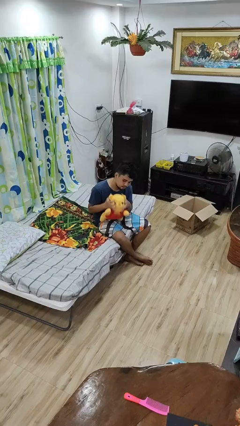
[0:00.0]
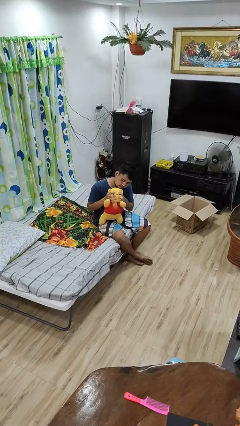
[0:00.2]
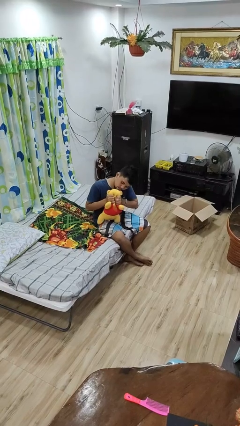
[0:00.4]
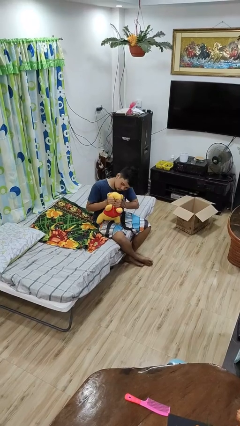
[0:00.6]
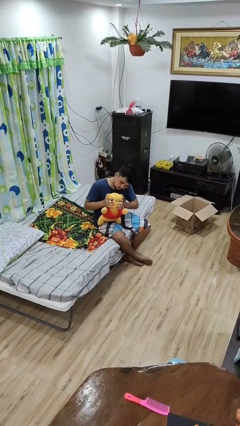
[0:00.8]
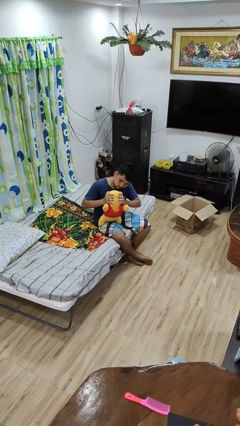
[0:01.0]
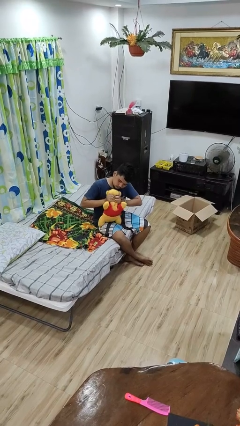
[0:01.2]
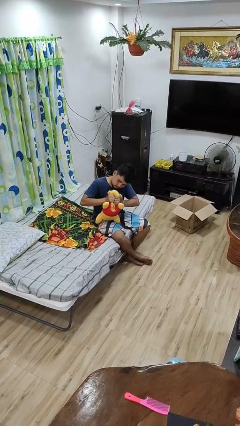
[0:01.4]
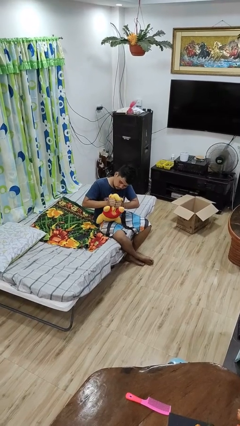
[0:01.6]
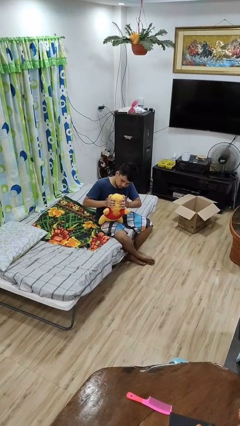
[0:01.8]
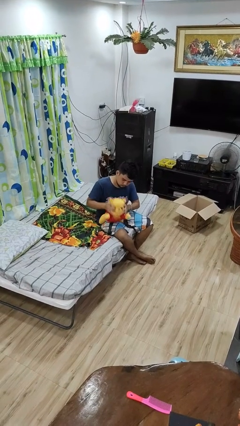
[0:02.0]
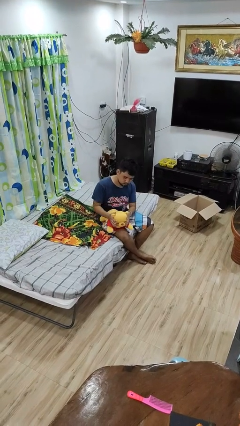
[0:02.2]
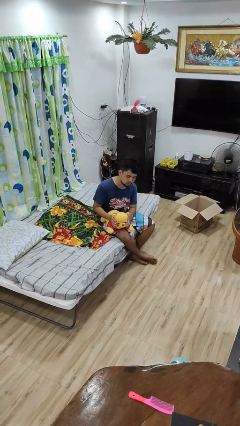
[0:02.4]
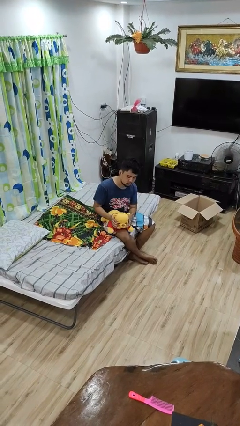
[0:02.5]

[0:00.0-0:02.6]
person squeezes object

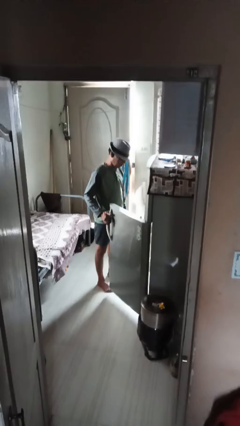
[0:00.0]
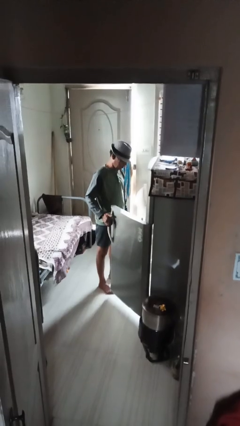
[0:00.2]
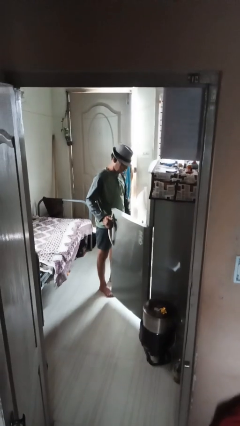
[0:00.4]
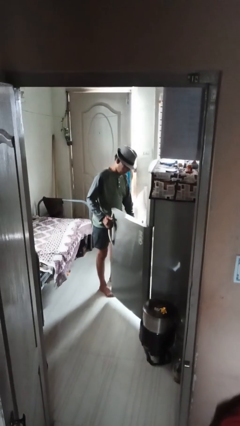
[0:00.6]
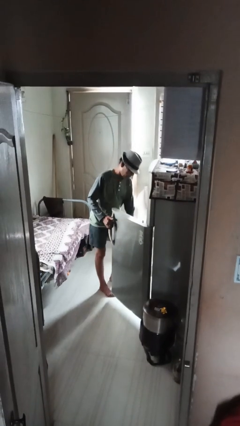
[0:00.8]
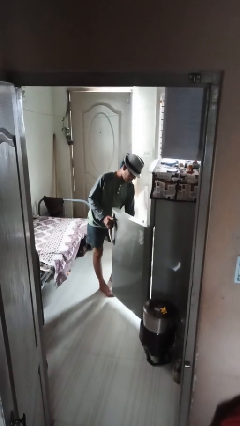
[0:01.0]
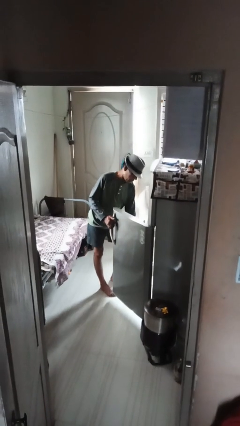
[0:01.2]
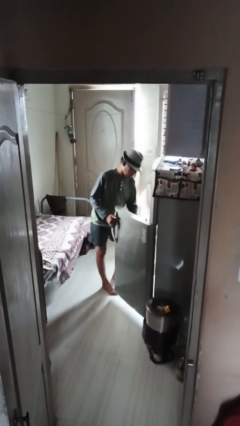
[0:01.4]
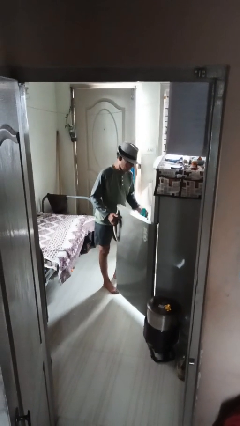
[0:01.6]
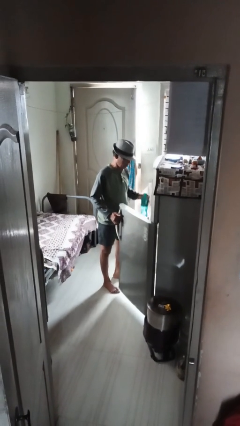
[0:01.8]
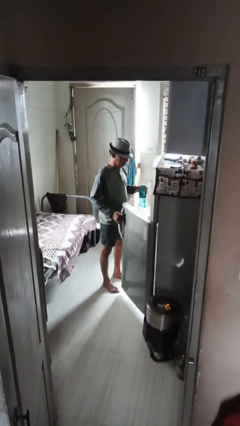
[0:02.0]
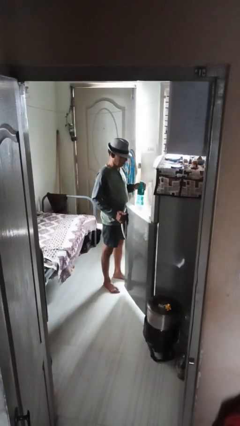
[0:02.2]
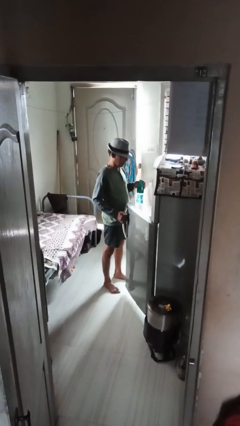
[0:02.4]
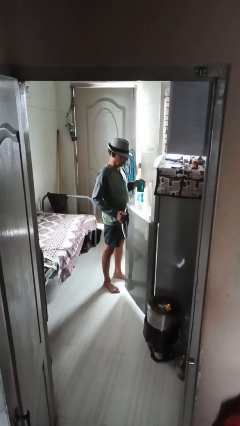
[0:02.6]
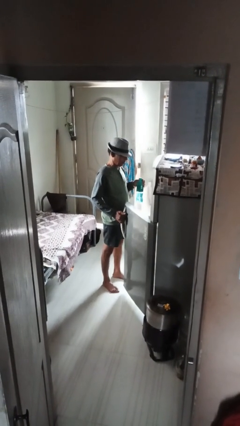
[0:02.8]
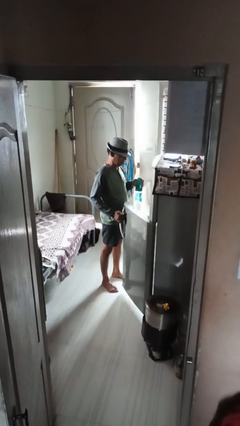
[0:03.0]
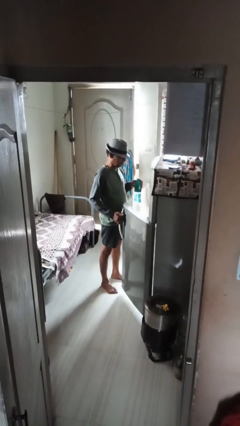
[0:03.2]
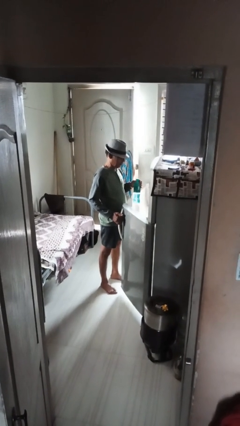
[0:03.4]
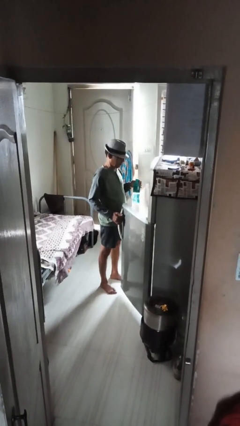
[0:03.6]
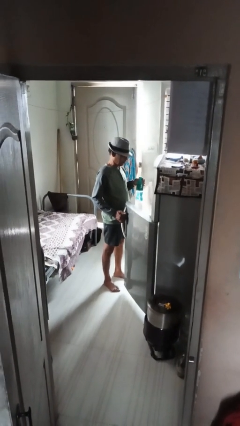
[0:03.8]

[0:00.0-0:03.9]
person takes object from refrigerator

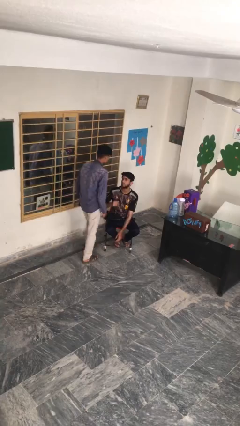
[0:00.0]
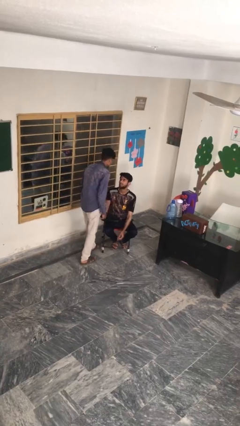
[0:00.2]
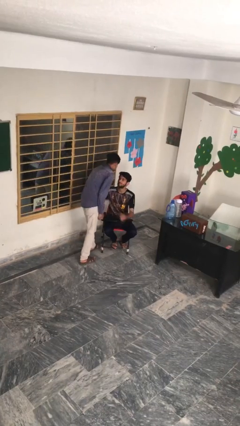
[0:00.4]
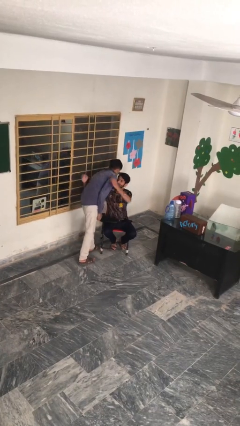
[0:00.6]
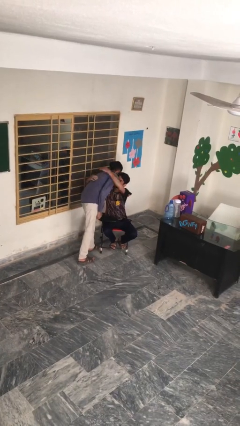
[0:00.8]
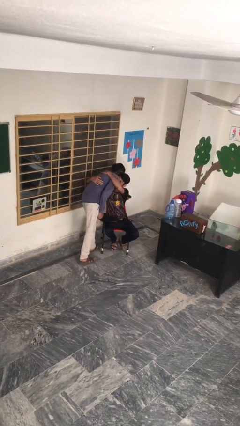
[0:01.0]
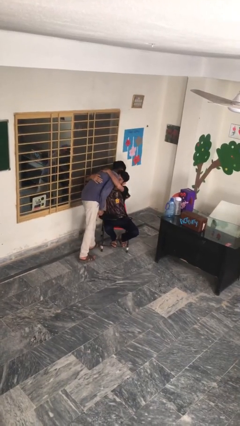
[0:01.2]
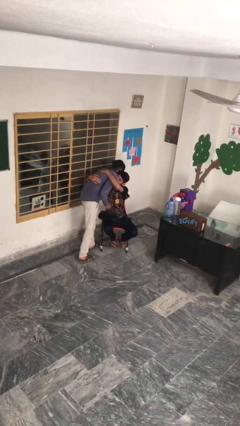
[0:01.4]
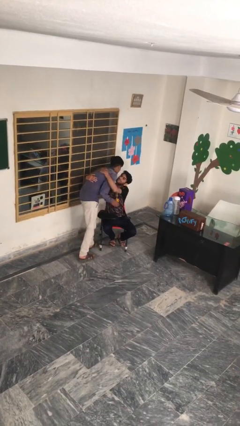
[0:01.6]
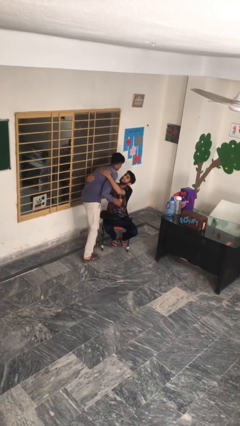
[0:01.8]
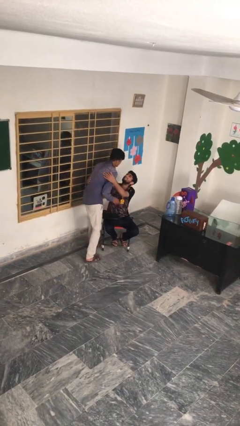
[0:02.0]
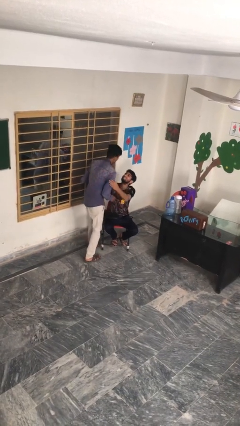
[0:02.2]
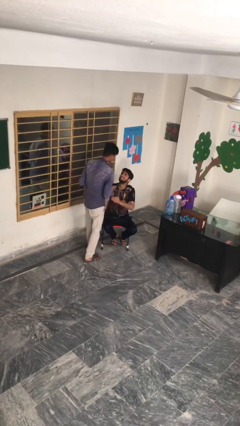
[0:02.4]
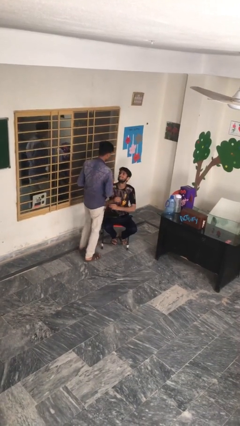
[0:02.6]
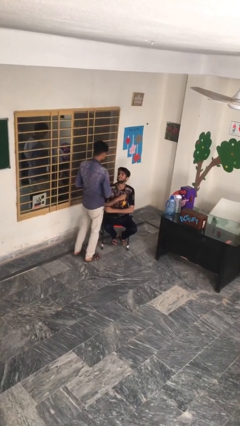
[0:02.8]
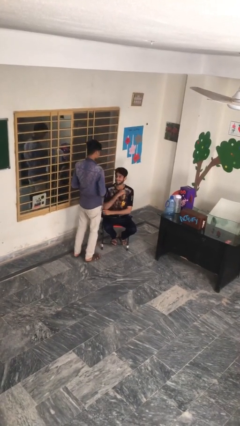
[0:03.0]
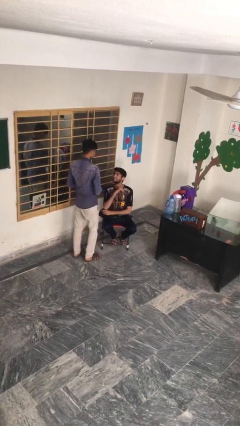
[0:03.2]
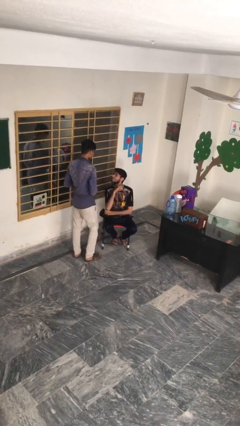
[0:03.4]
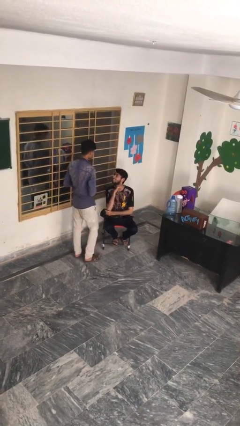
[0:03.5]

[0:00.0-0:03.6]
person embraces person

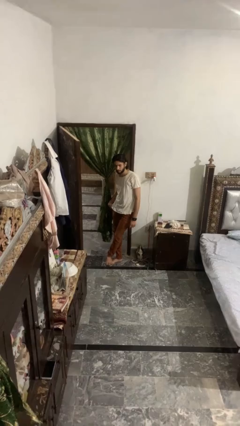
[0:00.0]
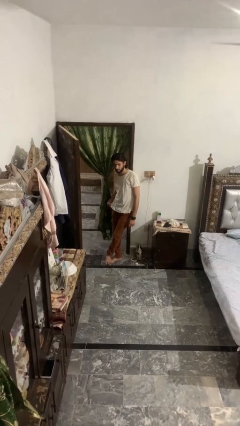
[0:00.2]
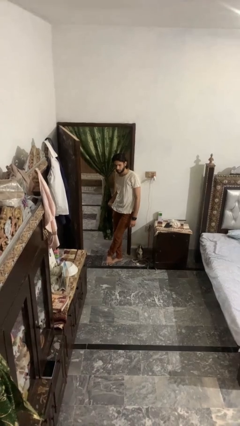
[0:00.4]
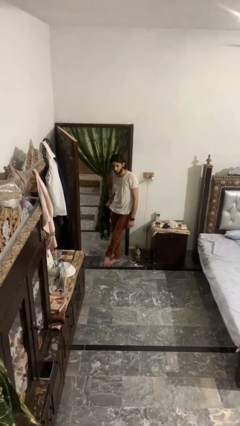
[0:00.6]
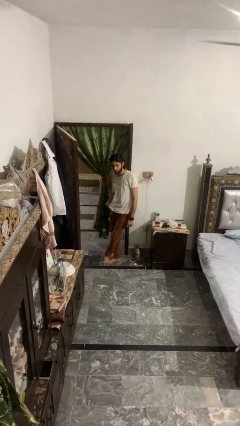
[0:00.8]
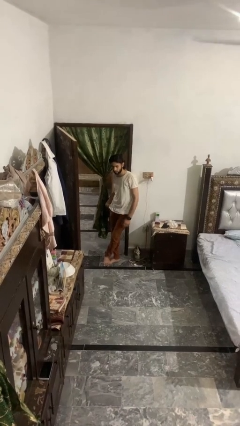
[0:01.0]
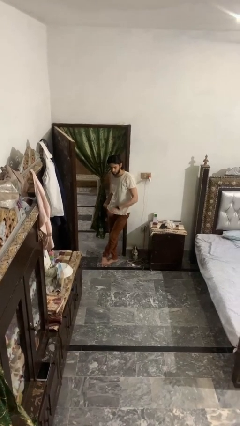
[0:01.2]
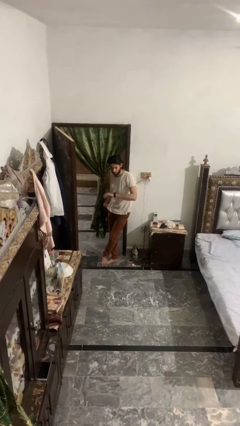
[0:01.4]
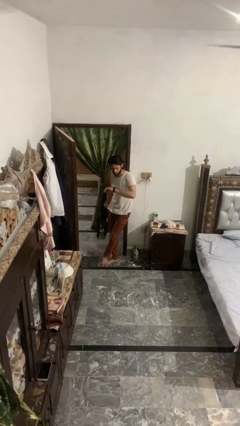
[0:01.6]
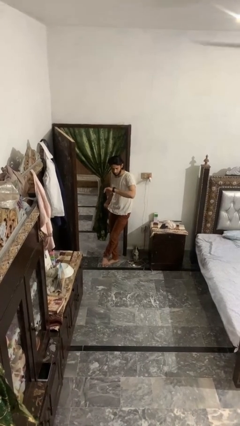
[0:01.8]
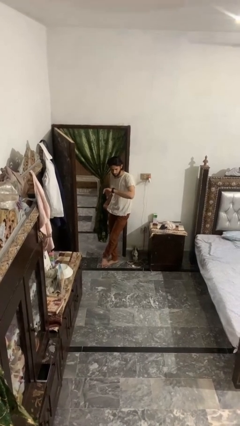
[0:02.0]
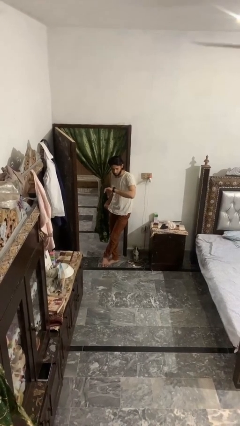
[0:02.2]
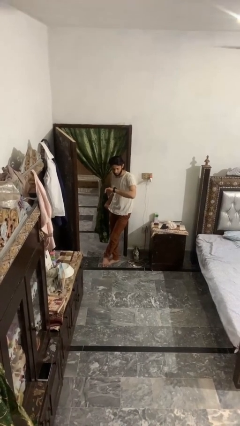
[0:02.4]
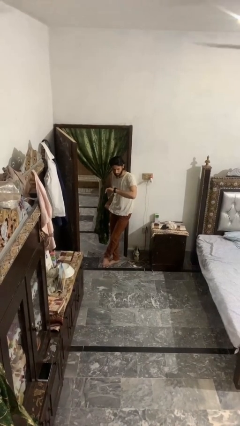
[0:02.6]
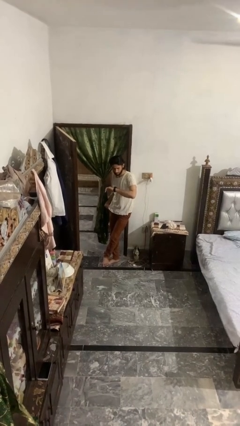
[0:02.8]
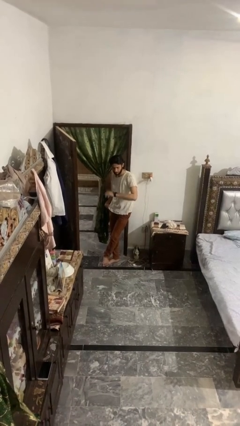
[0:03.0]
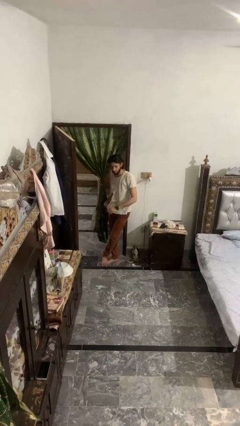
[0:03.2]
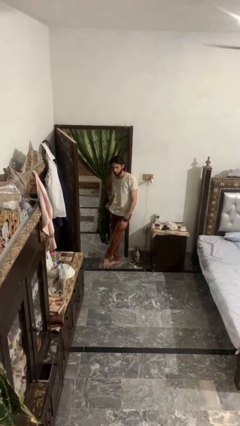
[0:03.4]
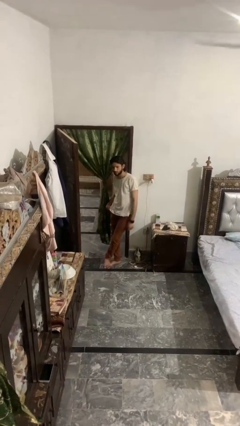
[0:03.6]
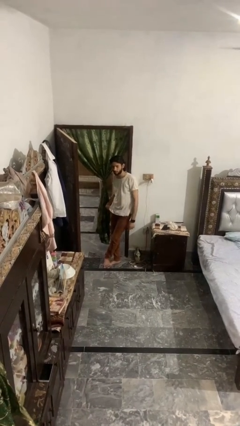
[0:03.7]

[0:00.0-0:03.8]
person looks at wristwatch

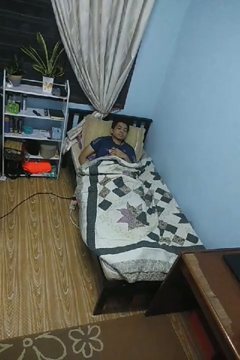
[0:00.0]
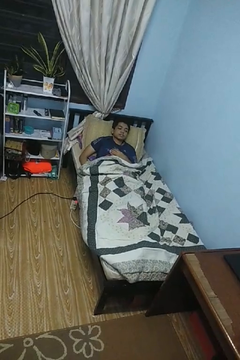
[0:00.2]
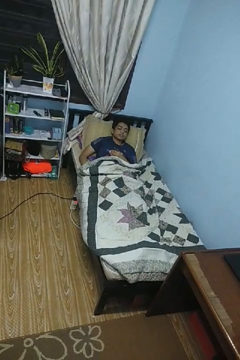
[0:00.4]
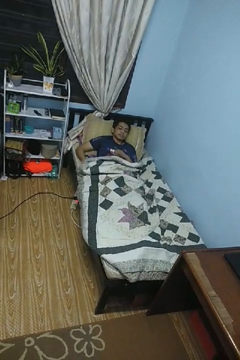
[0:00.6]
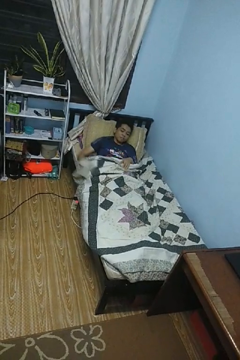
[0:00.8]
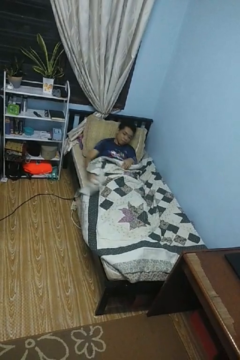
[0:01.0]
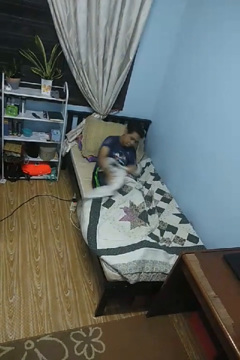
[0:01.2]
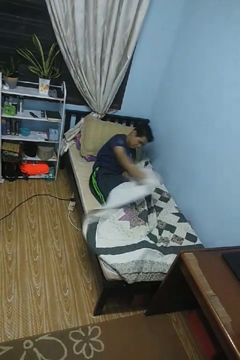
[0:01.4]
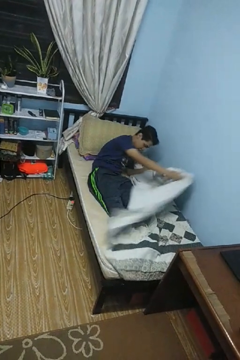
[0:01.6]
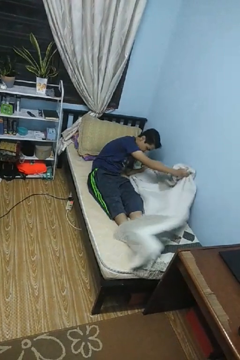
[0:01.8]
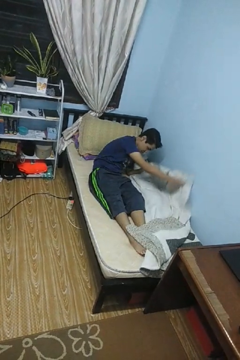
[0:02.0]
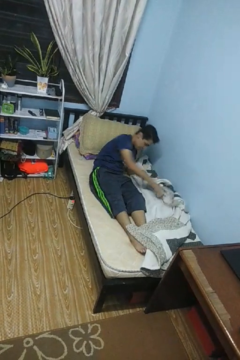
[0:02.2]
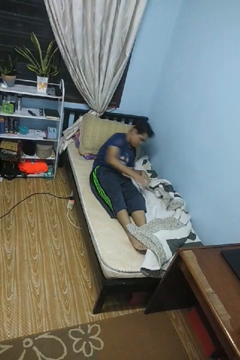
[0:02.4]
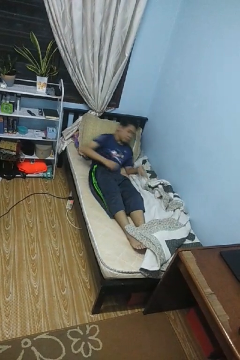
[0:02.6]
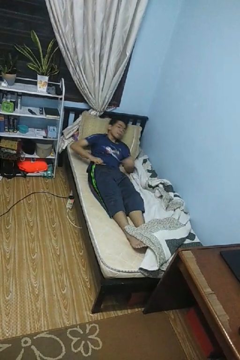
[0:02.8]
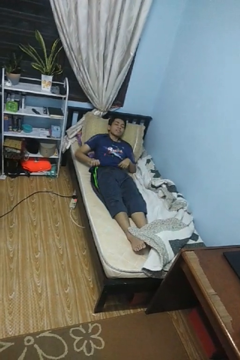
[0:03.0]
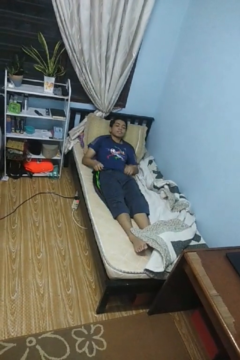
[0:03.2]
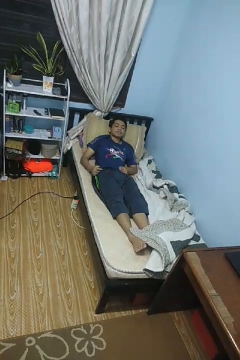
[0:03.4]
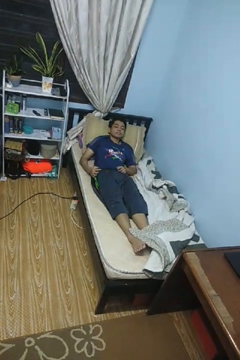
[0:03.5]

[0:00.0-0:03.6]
person uncovers with bedsheets

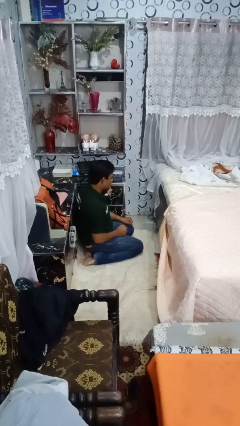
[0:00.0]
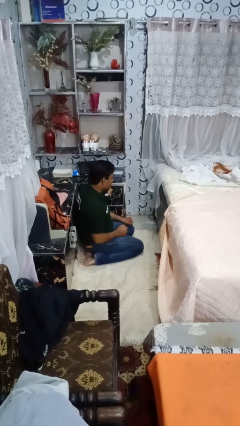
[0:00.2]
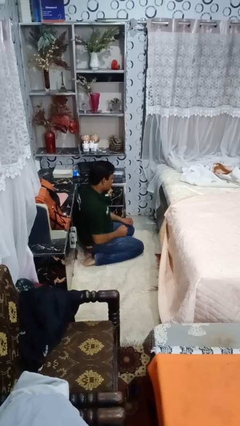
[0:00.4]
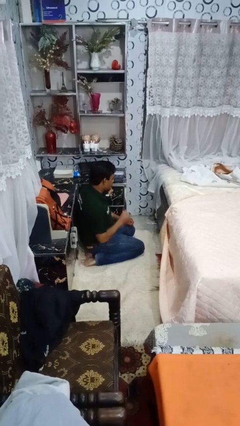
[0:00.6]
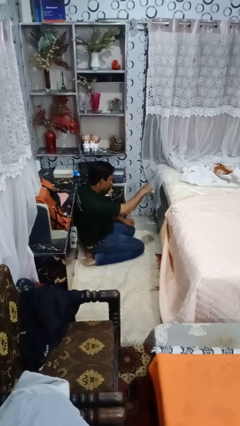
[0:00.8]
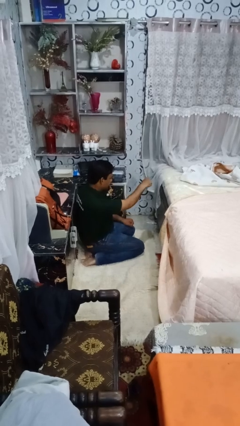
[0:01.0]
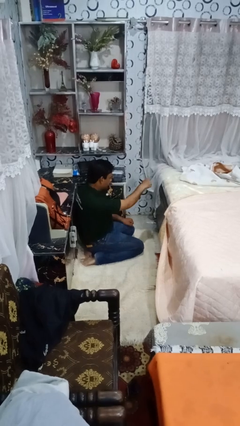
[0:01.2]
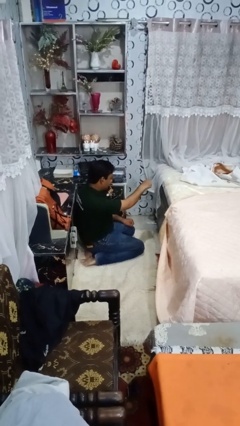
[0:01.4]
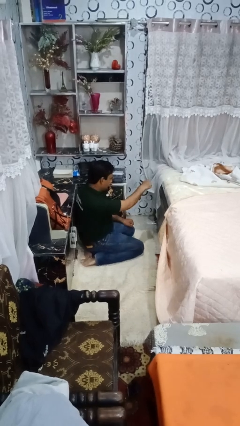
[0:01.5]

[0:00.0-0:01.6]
person punches
